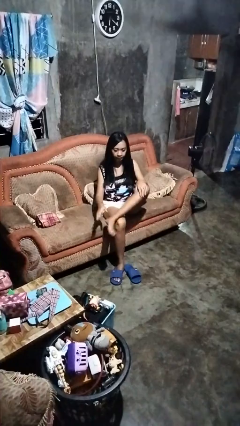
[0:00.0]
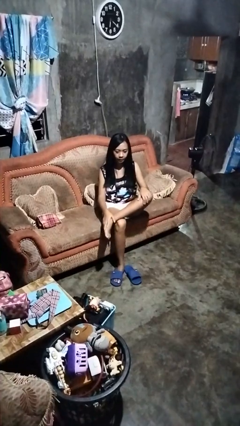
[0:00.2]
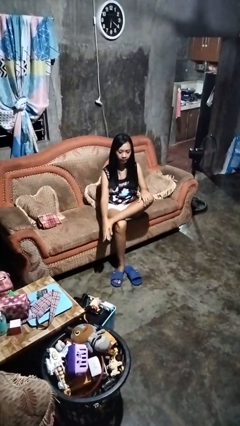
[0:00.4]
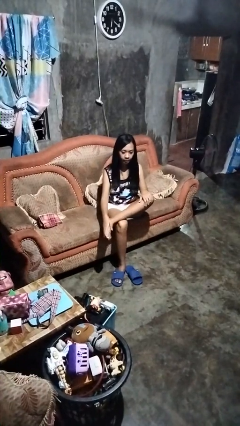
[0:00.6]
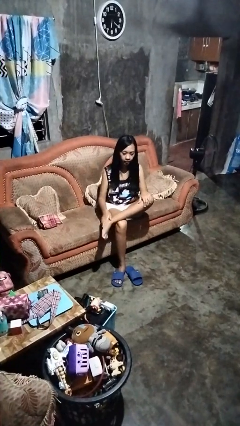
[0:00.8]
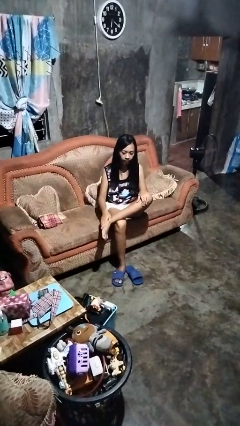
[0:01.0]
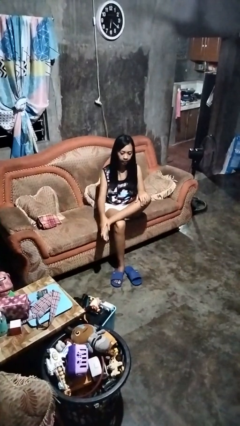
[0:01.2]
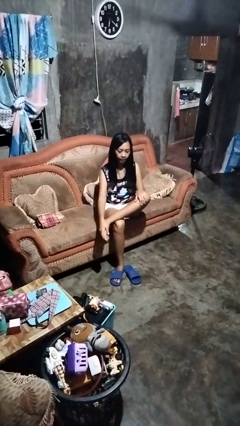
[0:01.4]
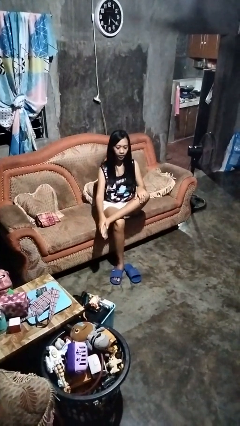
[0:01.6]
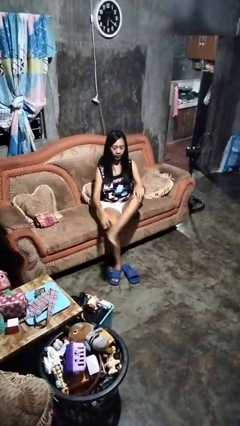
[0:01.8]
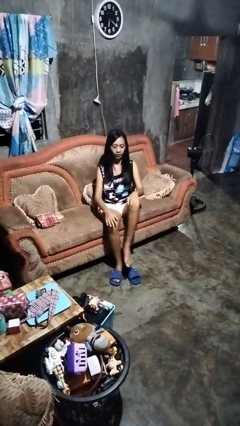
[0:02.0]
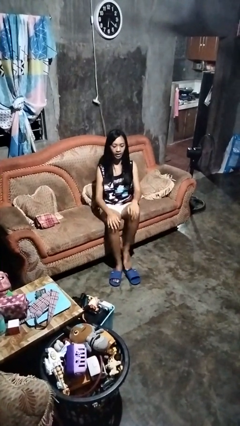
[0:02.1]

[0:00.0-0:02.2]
person rubs foot

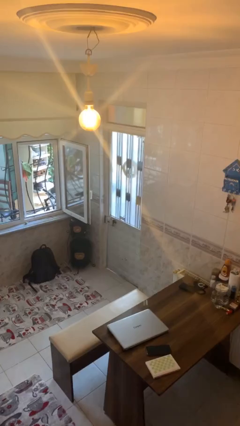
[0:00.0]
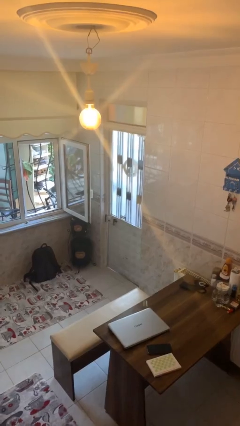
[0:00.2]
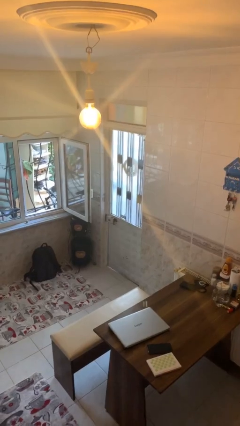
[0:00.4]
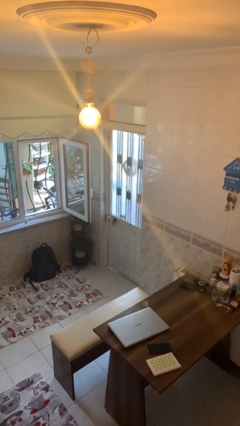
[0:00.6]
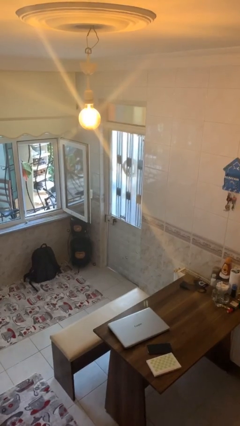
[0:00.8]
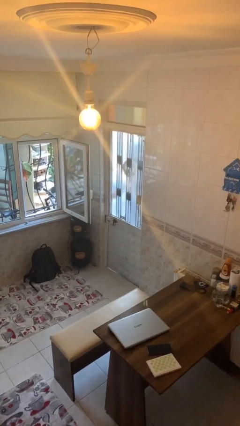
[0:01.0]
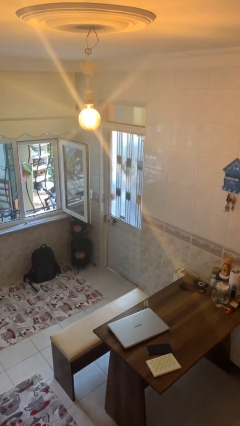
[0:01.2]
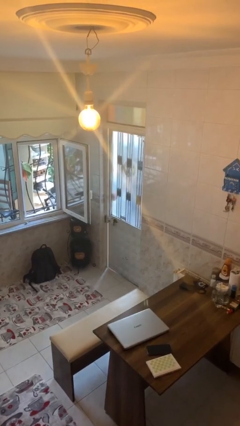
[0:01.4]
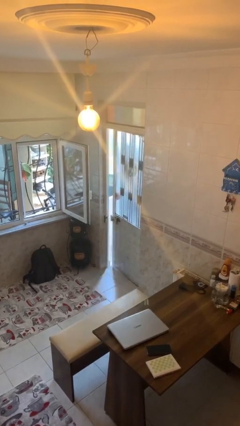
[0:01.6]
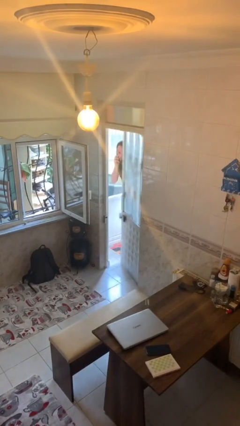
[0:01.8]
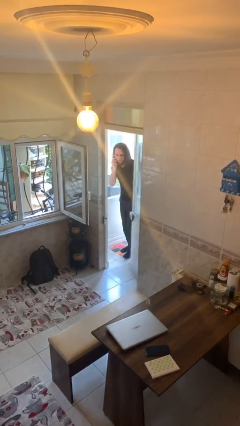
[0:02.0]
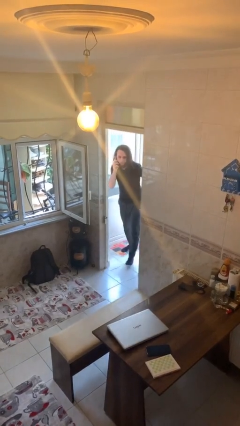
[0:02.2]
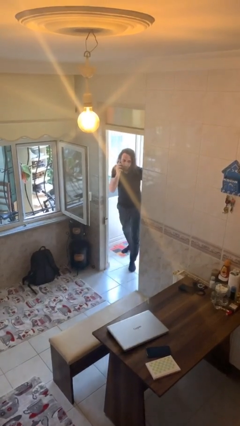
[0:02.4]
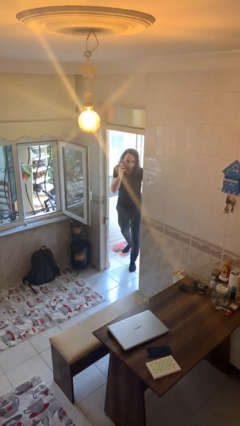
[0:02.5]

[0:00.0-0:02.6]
person opens facility door

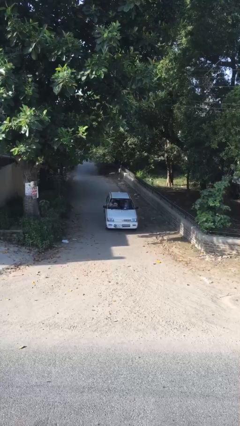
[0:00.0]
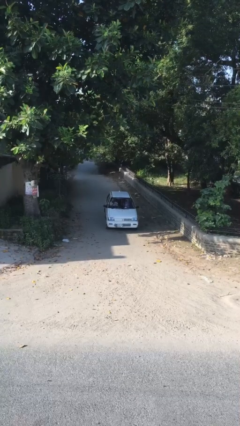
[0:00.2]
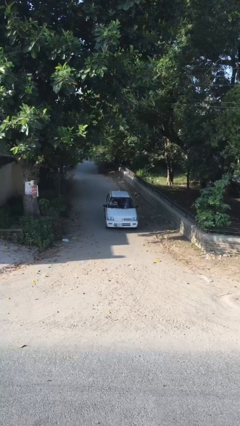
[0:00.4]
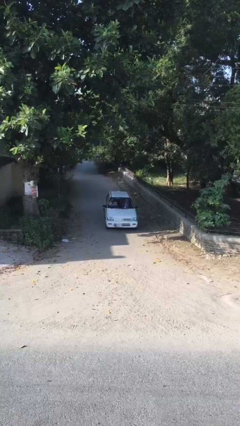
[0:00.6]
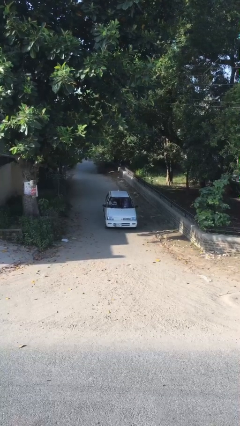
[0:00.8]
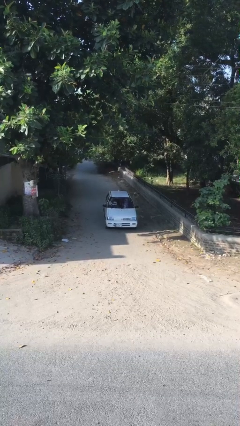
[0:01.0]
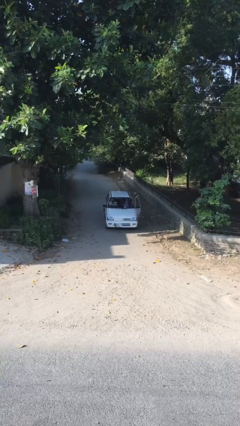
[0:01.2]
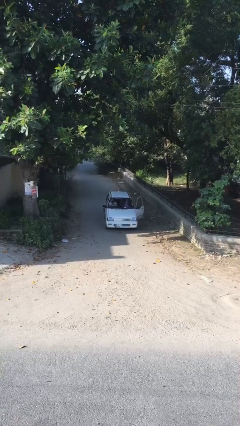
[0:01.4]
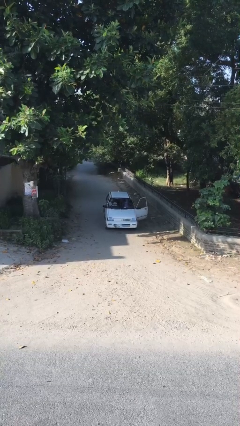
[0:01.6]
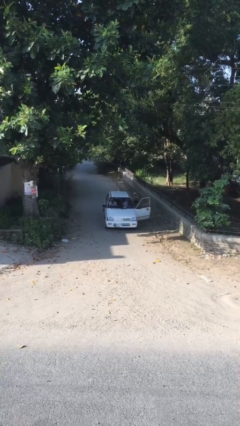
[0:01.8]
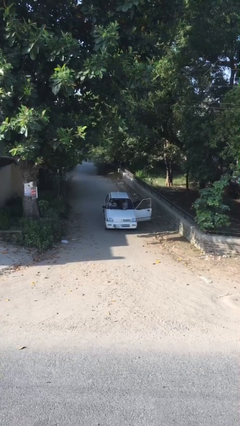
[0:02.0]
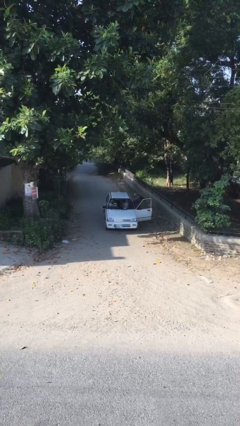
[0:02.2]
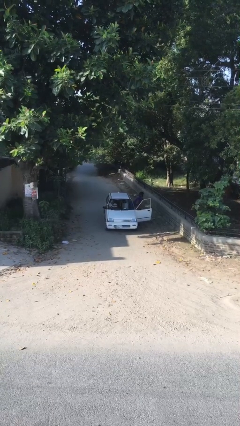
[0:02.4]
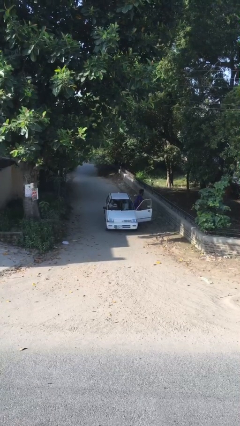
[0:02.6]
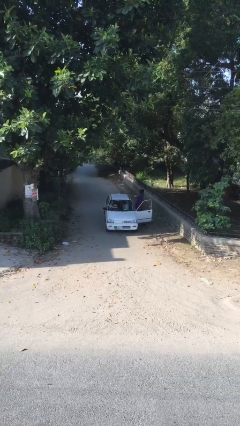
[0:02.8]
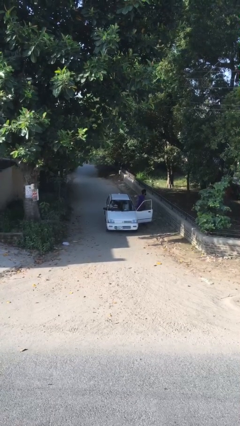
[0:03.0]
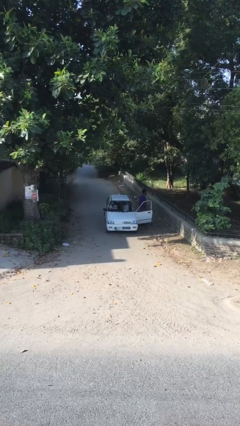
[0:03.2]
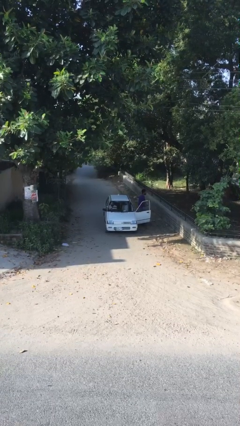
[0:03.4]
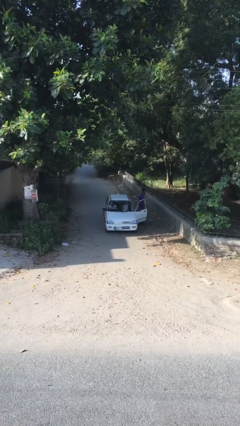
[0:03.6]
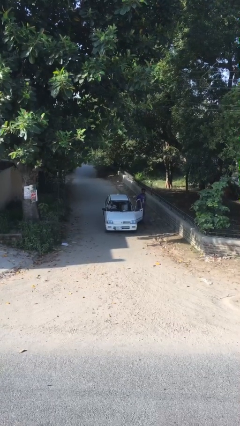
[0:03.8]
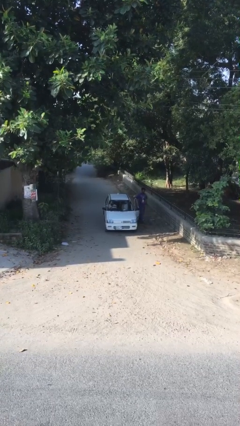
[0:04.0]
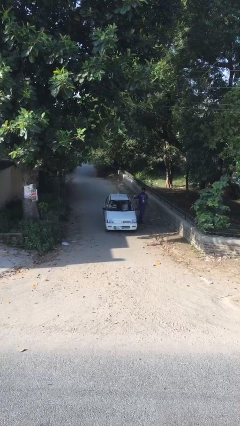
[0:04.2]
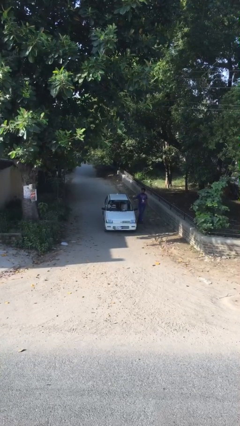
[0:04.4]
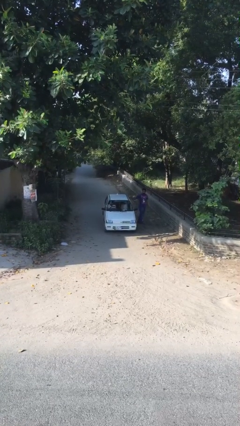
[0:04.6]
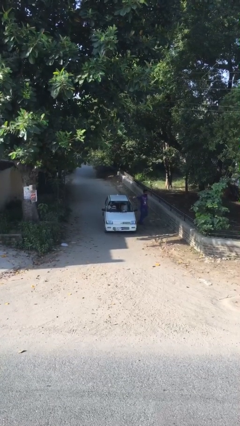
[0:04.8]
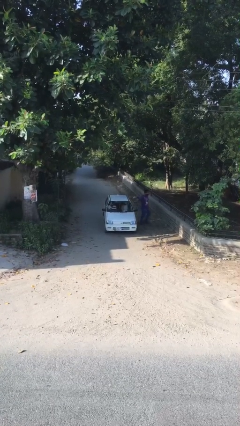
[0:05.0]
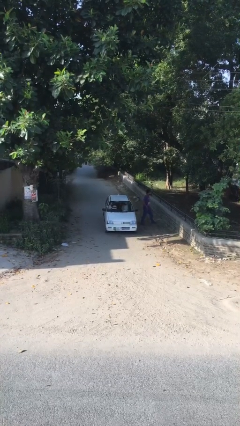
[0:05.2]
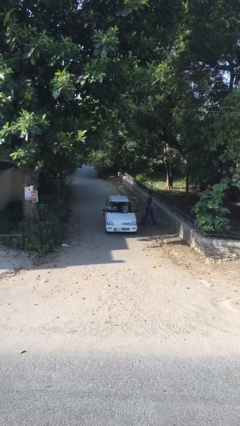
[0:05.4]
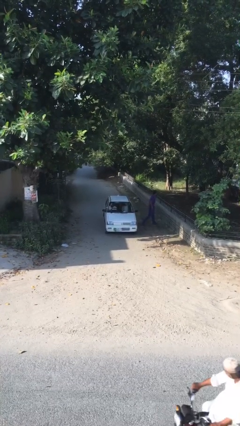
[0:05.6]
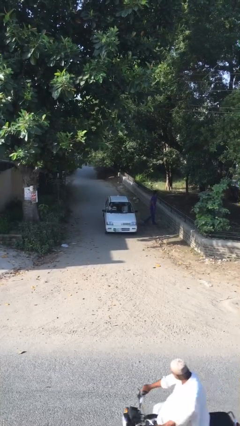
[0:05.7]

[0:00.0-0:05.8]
car drops off person

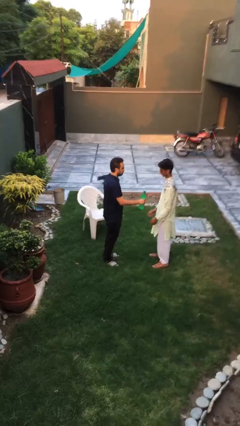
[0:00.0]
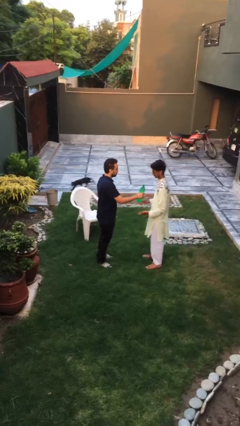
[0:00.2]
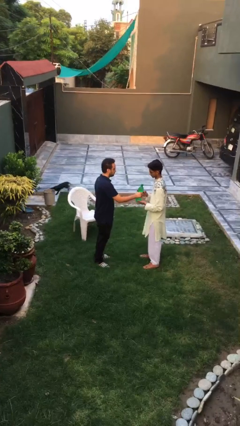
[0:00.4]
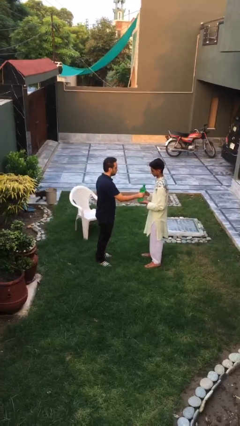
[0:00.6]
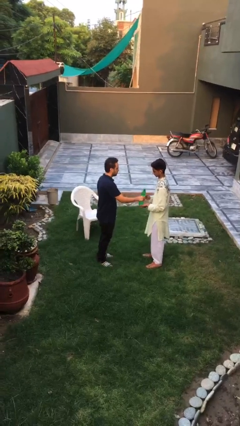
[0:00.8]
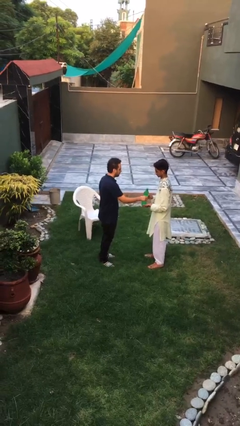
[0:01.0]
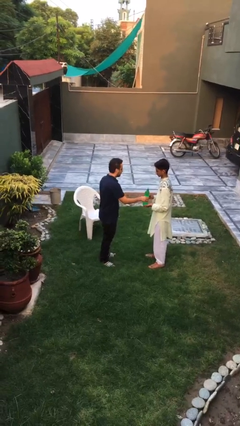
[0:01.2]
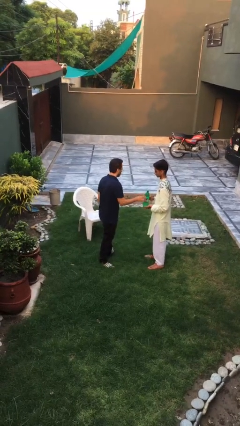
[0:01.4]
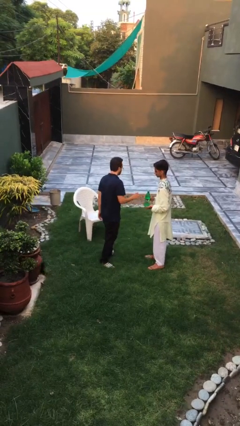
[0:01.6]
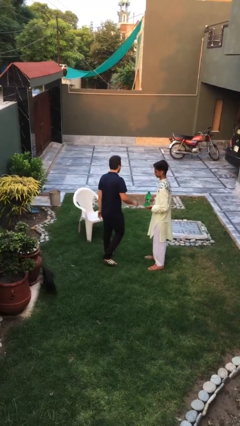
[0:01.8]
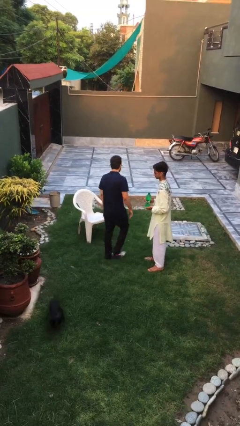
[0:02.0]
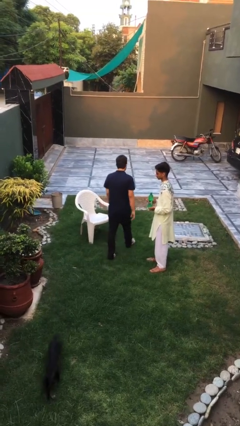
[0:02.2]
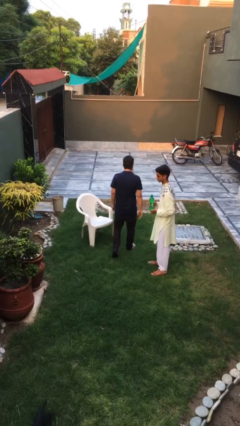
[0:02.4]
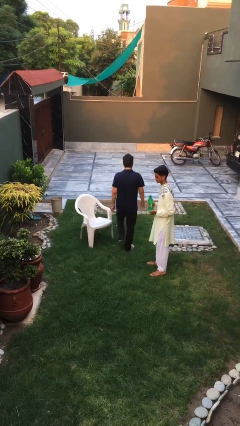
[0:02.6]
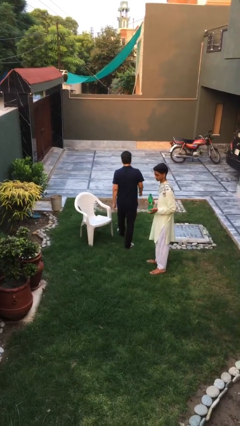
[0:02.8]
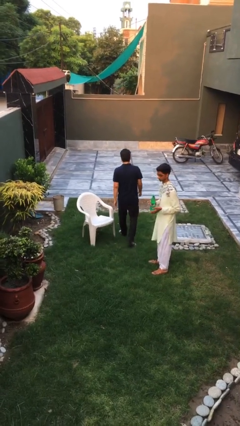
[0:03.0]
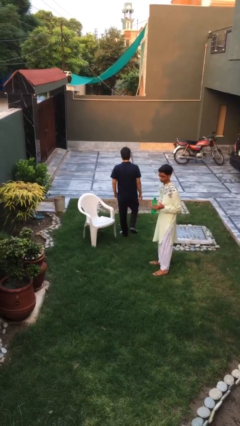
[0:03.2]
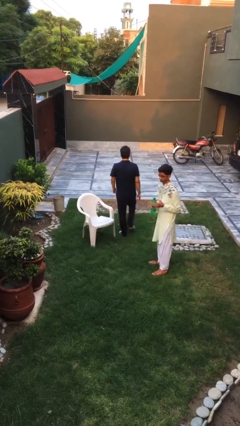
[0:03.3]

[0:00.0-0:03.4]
person transfers object to person

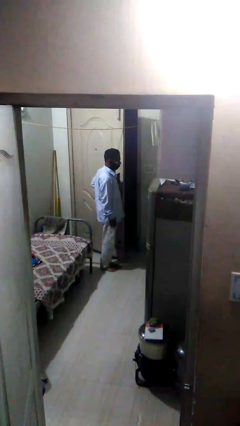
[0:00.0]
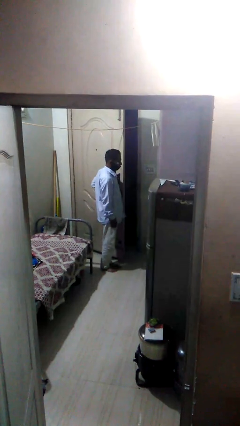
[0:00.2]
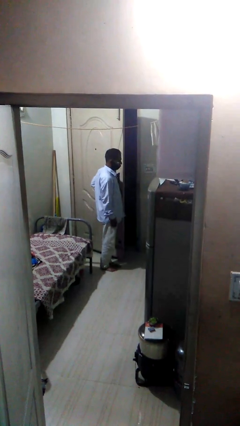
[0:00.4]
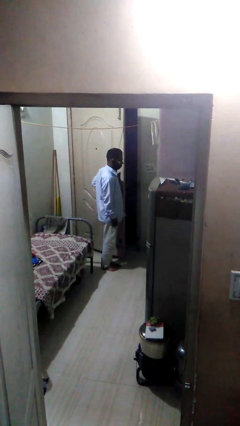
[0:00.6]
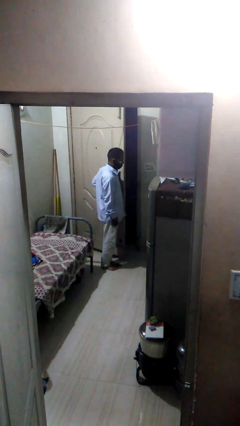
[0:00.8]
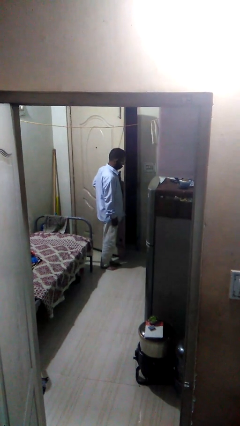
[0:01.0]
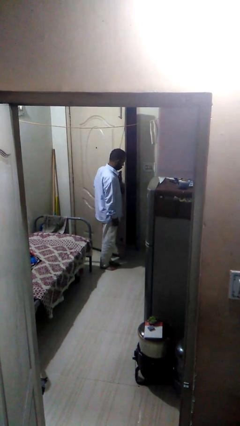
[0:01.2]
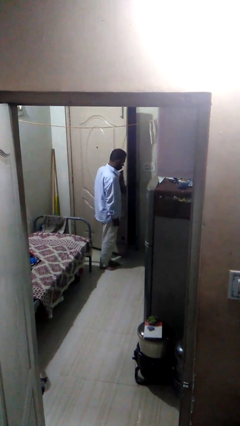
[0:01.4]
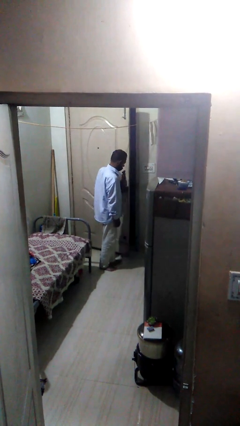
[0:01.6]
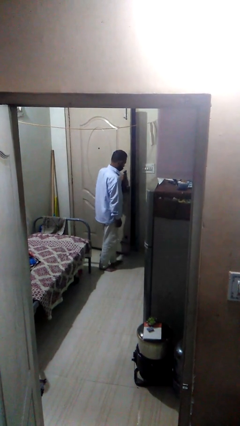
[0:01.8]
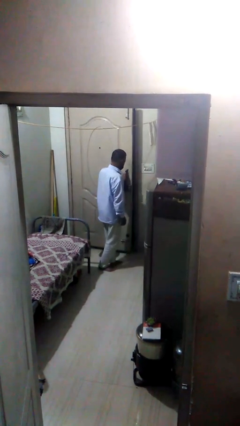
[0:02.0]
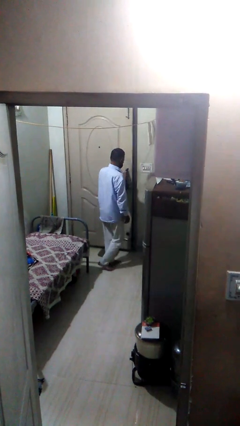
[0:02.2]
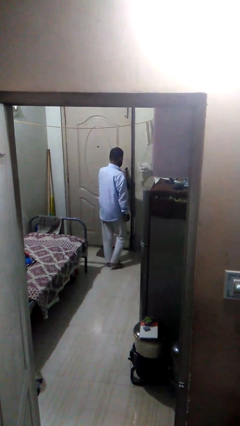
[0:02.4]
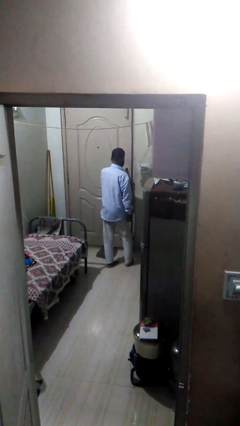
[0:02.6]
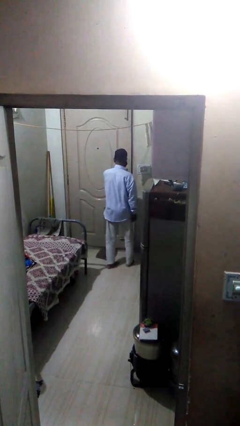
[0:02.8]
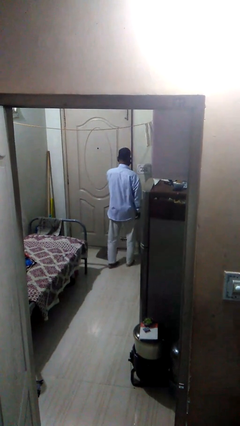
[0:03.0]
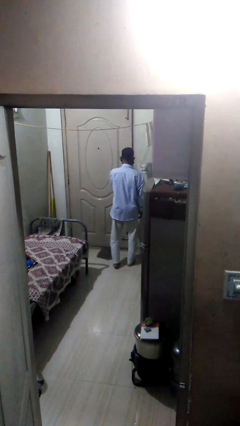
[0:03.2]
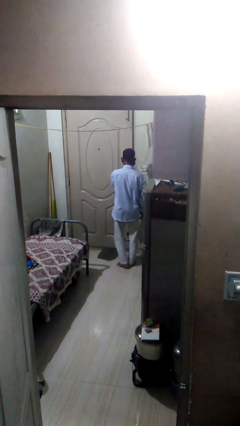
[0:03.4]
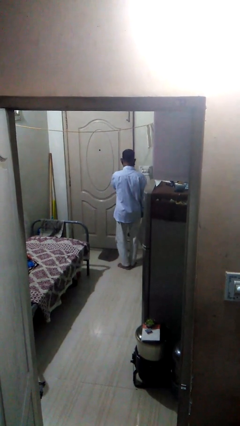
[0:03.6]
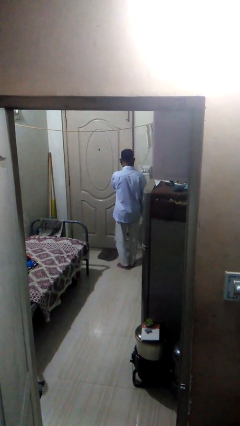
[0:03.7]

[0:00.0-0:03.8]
person closes facility door
